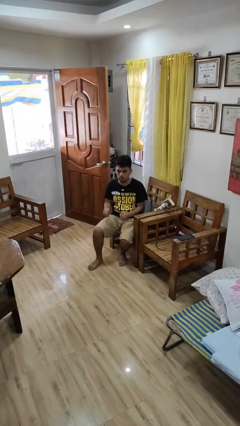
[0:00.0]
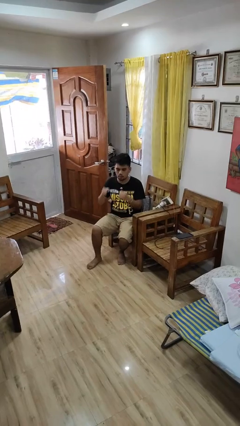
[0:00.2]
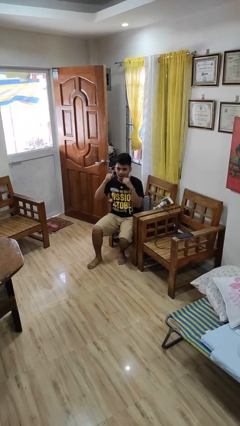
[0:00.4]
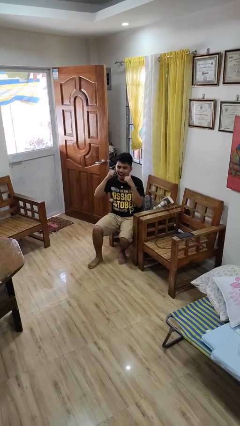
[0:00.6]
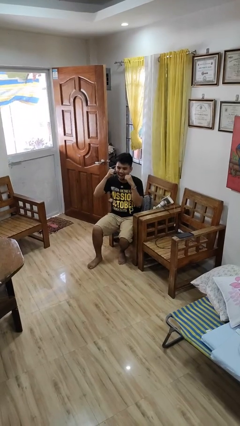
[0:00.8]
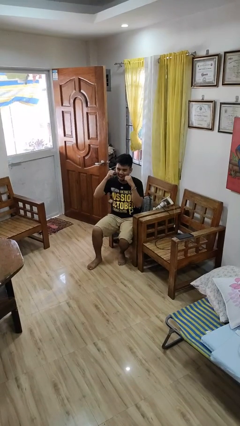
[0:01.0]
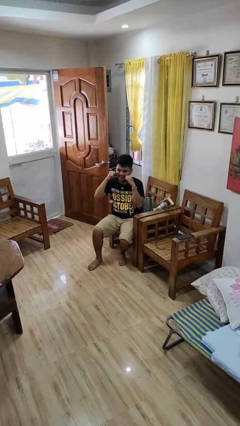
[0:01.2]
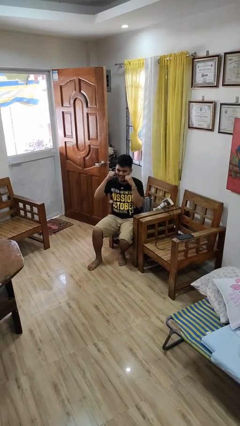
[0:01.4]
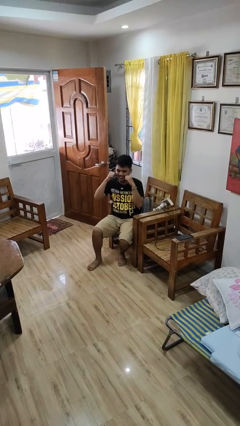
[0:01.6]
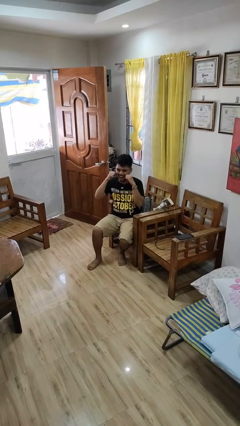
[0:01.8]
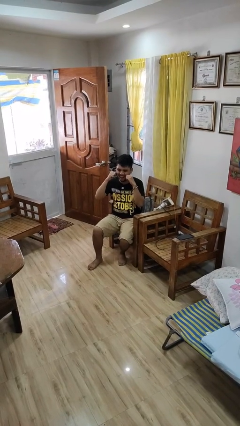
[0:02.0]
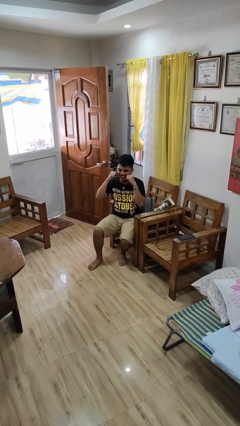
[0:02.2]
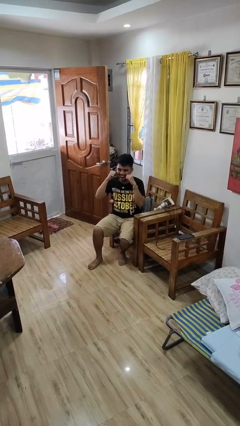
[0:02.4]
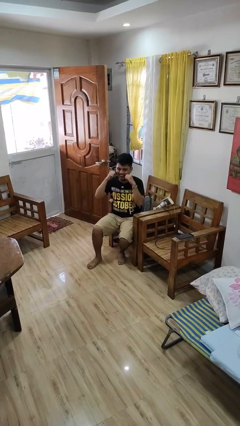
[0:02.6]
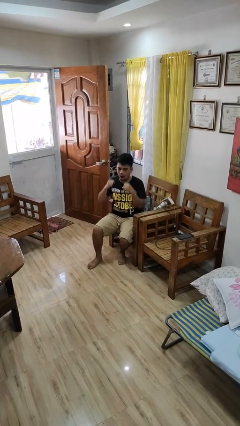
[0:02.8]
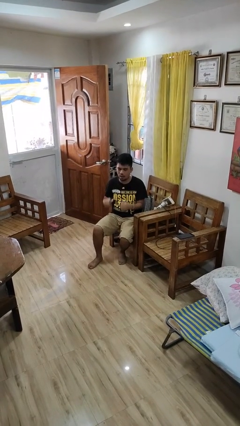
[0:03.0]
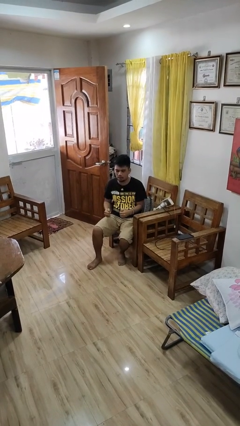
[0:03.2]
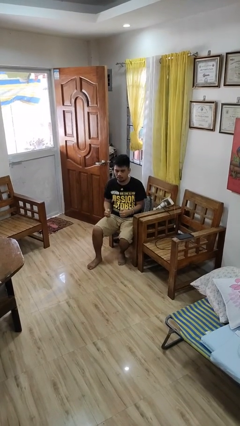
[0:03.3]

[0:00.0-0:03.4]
person flosses

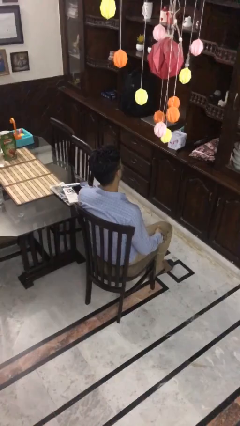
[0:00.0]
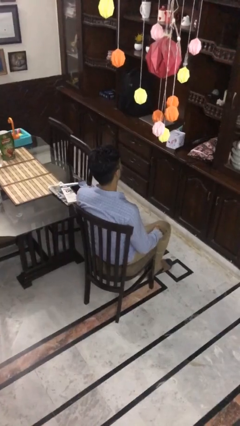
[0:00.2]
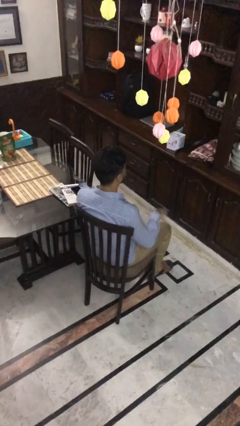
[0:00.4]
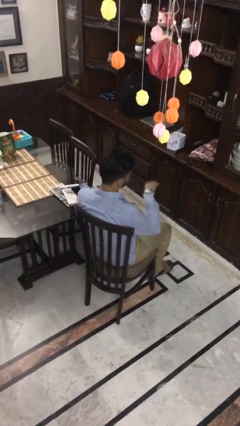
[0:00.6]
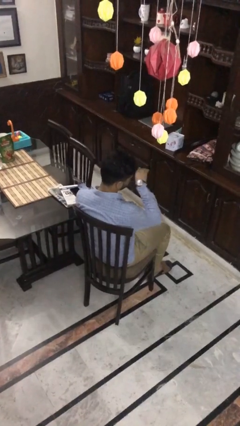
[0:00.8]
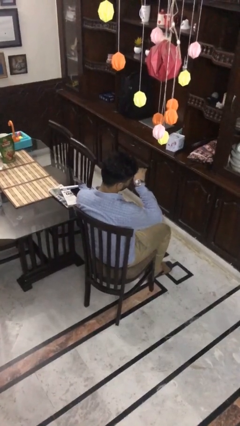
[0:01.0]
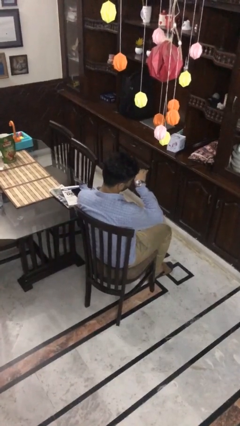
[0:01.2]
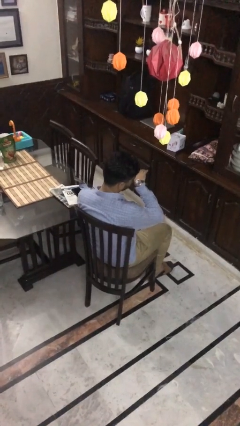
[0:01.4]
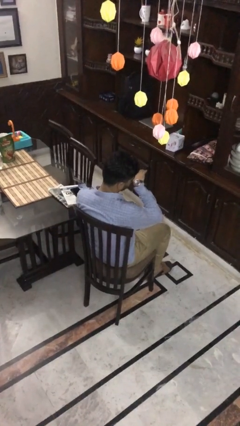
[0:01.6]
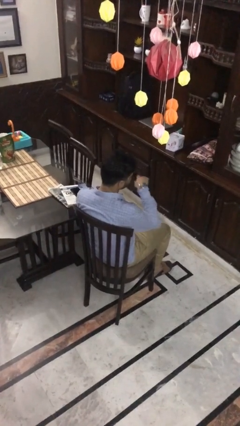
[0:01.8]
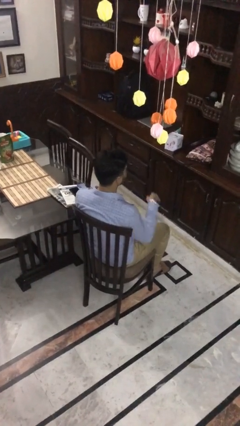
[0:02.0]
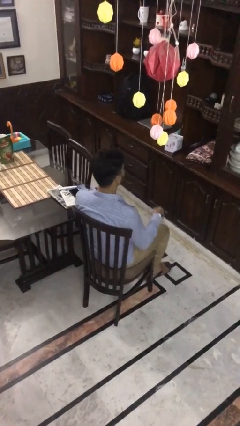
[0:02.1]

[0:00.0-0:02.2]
person looks at wristwatch

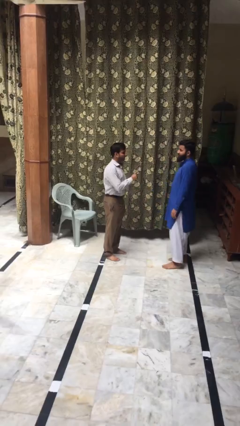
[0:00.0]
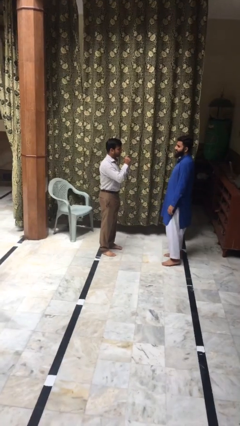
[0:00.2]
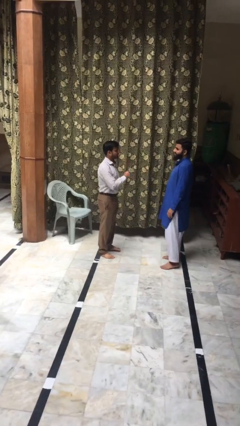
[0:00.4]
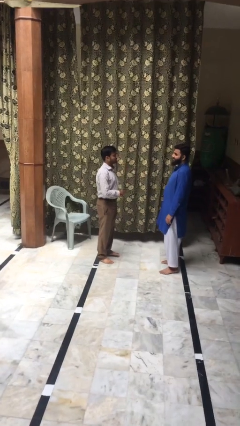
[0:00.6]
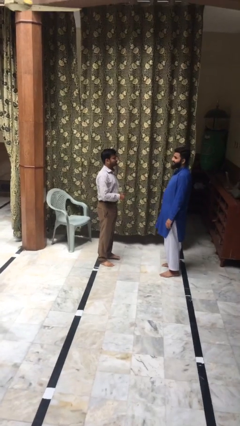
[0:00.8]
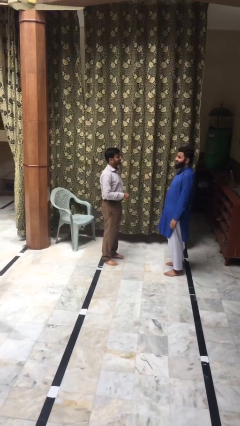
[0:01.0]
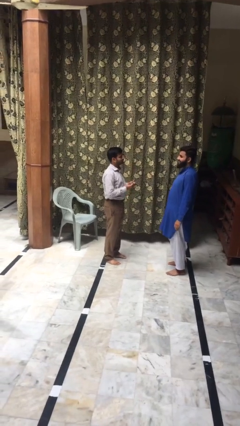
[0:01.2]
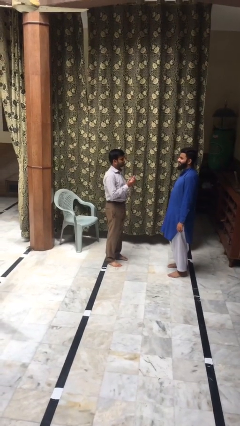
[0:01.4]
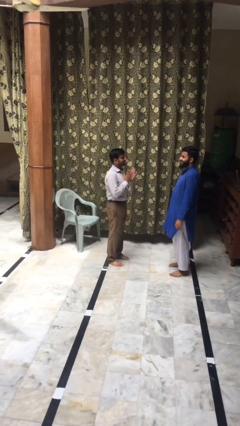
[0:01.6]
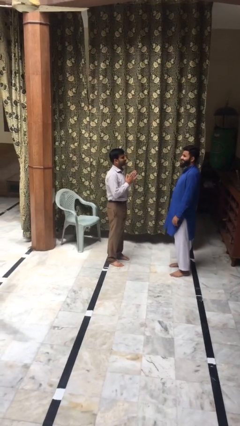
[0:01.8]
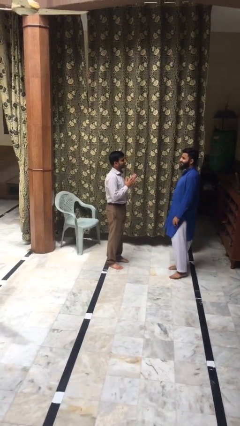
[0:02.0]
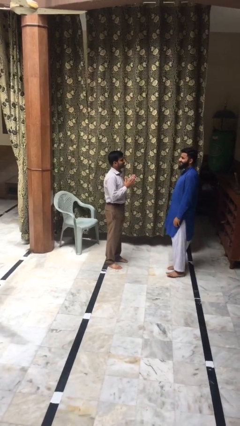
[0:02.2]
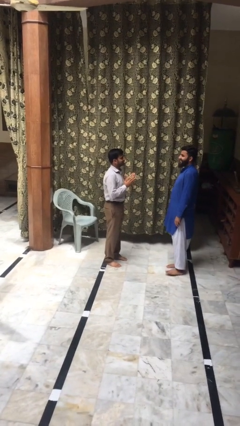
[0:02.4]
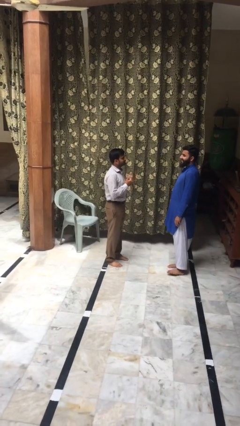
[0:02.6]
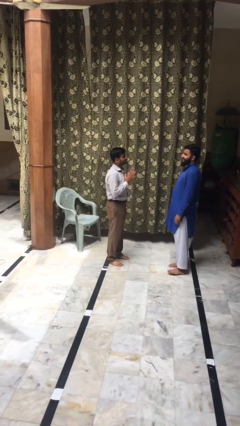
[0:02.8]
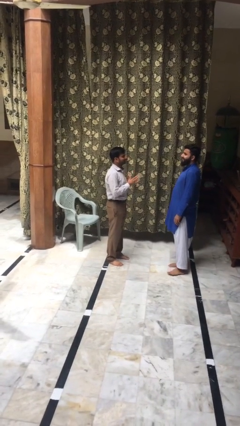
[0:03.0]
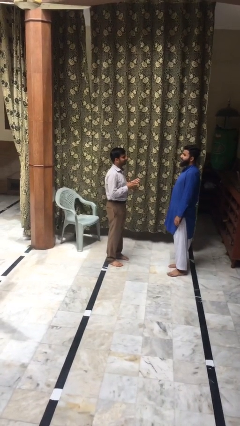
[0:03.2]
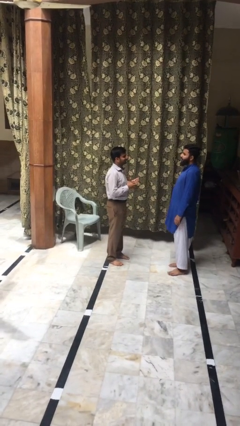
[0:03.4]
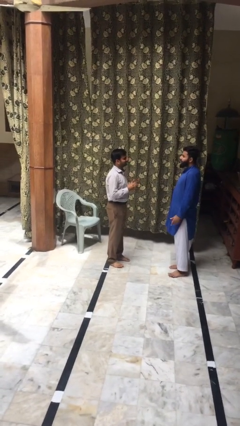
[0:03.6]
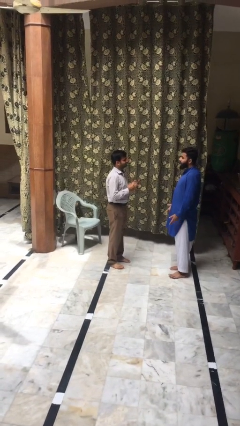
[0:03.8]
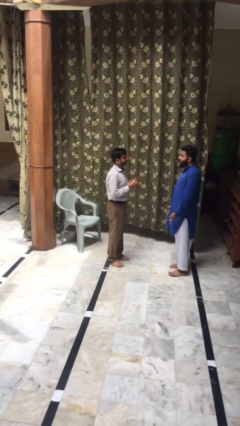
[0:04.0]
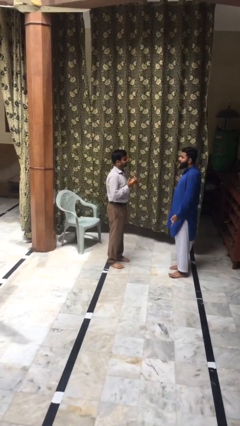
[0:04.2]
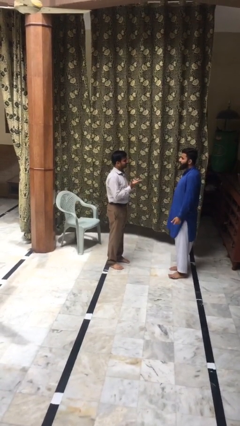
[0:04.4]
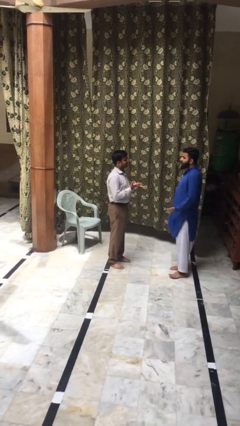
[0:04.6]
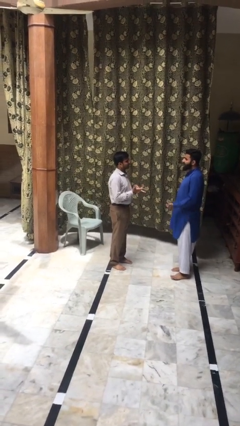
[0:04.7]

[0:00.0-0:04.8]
person talks to person

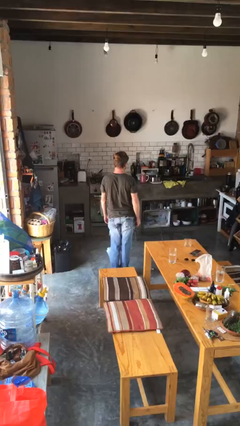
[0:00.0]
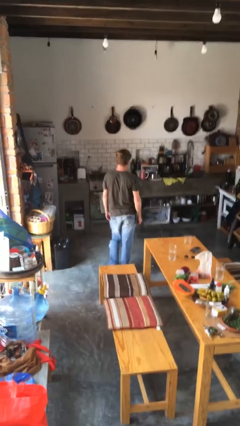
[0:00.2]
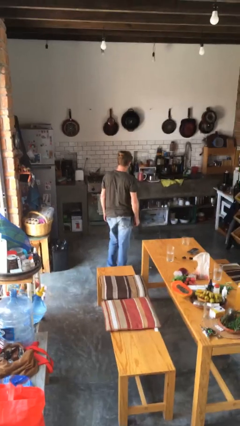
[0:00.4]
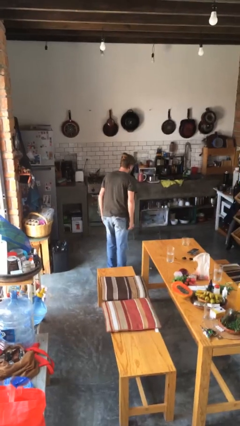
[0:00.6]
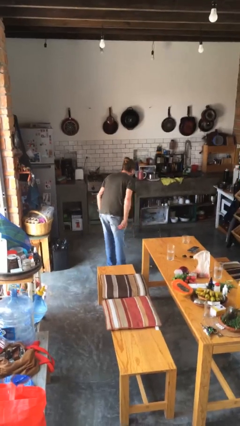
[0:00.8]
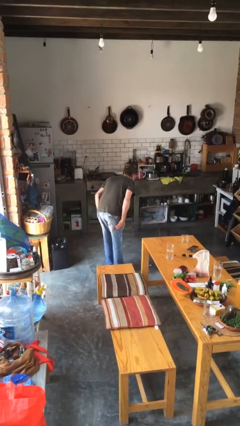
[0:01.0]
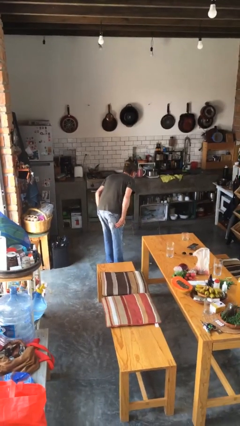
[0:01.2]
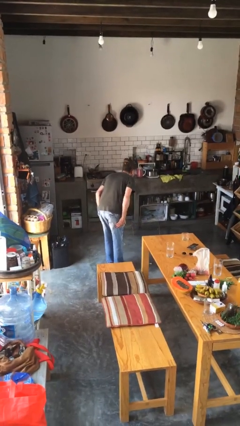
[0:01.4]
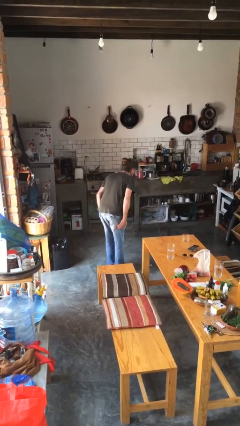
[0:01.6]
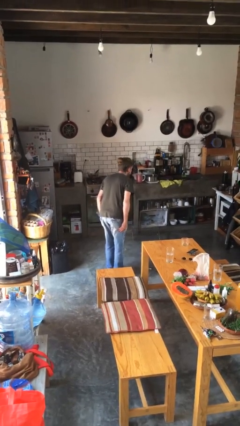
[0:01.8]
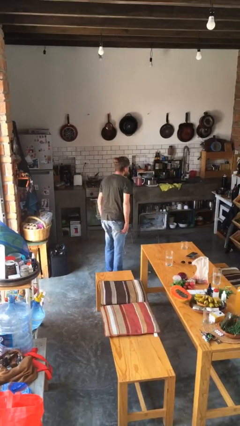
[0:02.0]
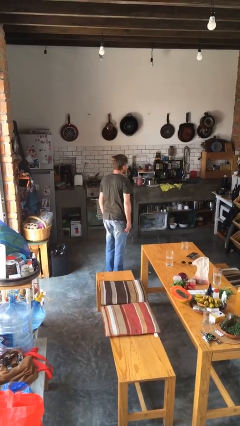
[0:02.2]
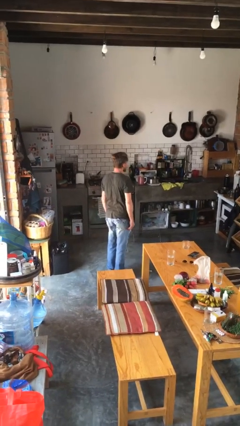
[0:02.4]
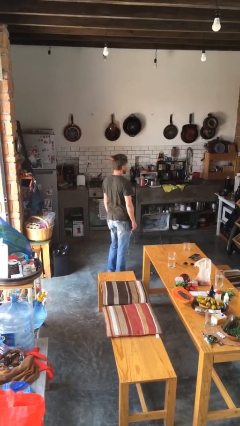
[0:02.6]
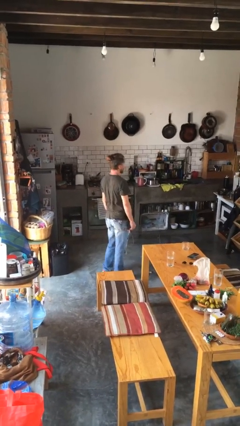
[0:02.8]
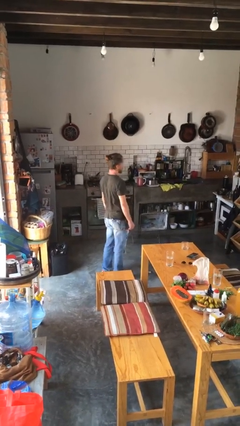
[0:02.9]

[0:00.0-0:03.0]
person bows

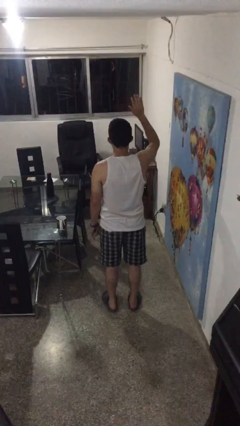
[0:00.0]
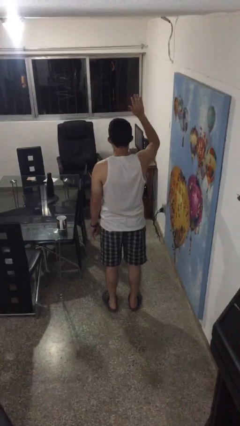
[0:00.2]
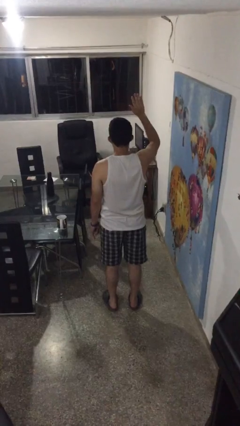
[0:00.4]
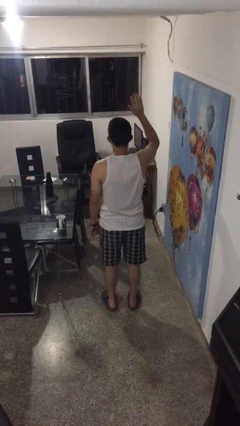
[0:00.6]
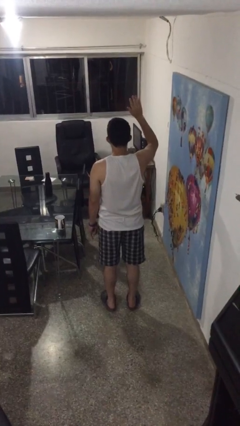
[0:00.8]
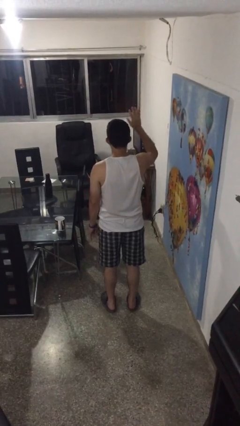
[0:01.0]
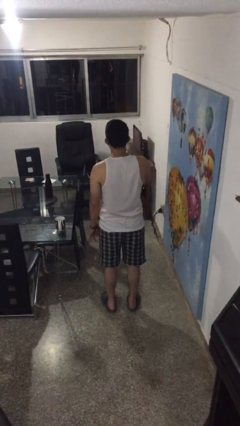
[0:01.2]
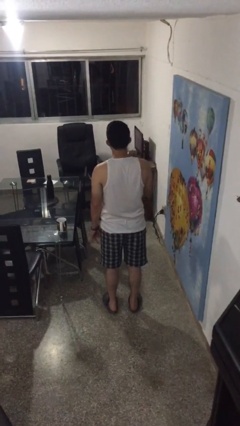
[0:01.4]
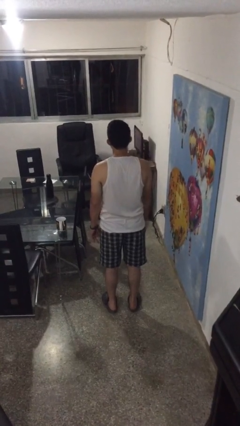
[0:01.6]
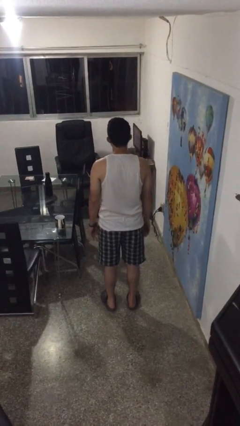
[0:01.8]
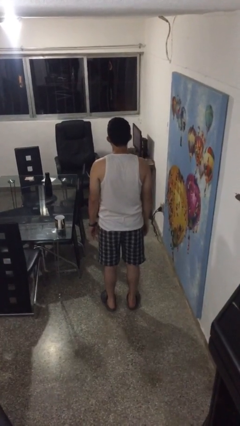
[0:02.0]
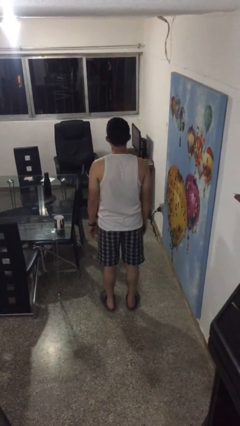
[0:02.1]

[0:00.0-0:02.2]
person gestures lower hand

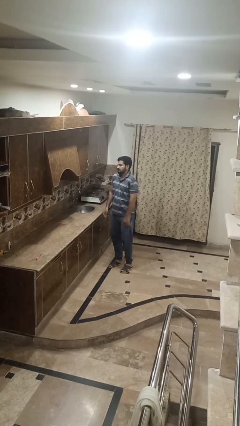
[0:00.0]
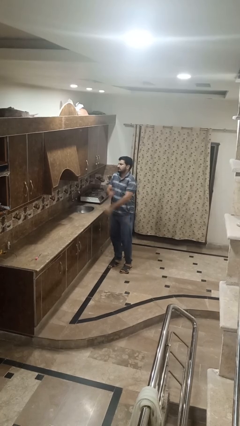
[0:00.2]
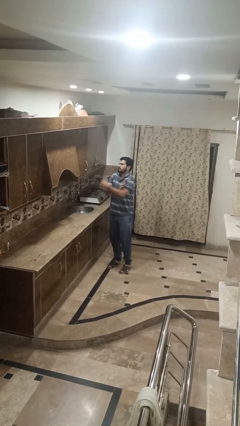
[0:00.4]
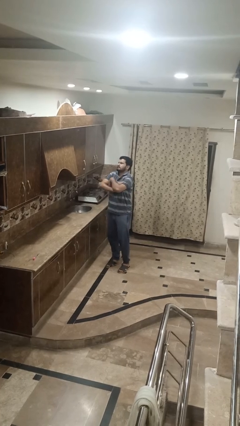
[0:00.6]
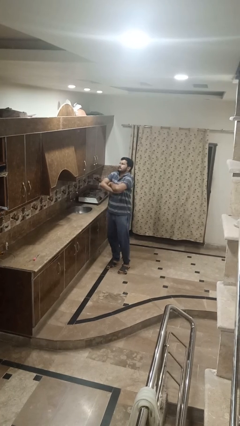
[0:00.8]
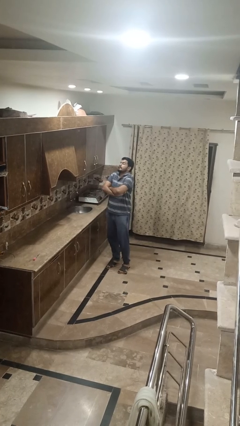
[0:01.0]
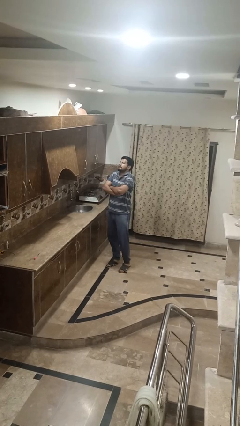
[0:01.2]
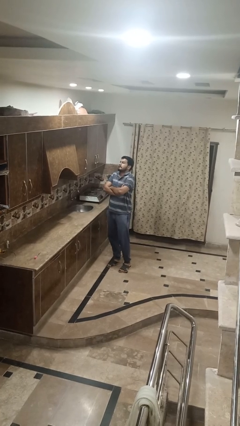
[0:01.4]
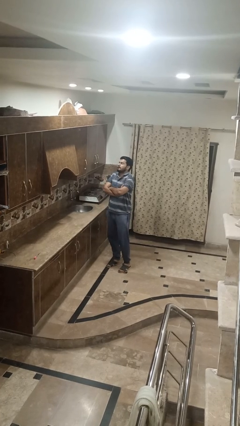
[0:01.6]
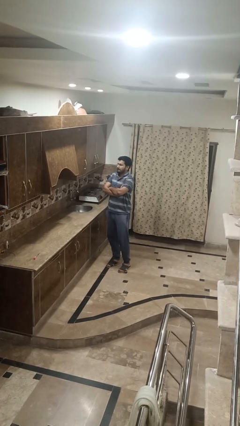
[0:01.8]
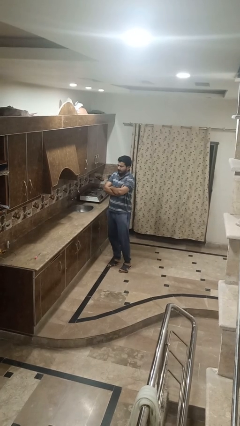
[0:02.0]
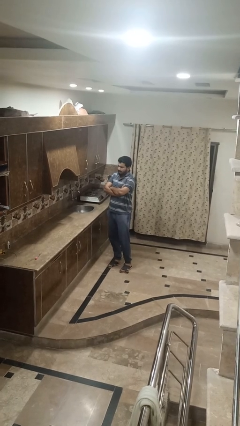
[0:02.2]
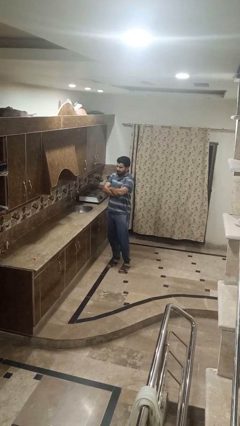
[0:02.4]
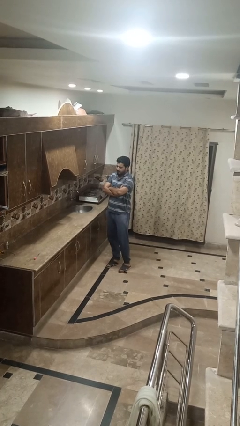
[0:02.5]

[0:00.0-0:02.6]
person crosses arms
